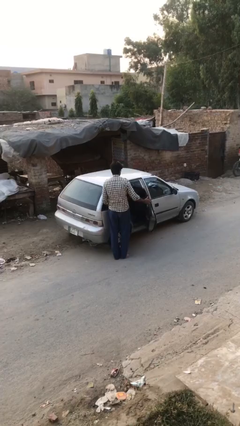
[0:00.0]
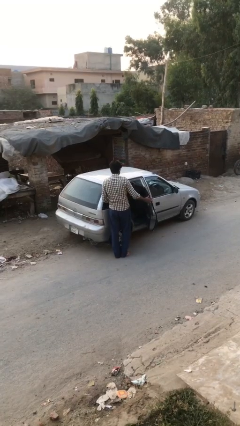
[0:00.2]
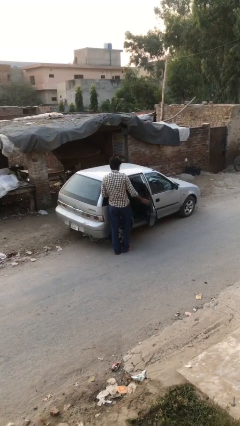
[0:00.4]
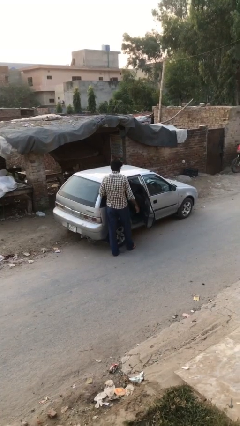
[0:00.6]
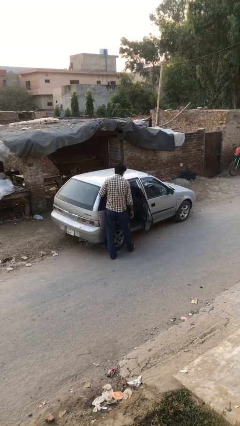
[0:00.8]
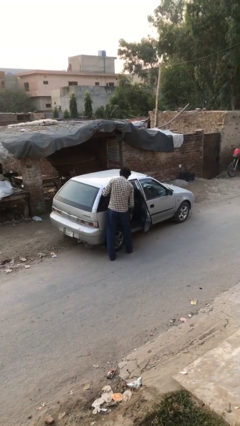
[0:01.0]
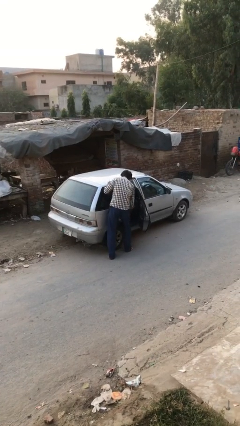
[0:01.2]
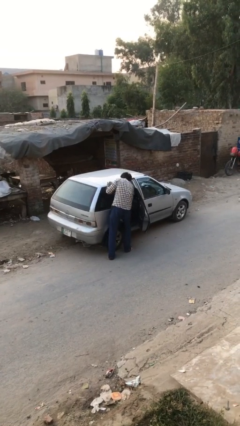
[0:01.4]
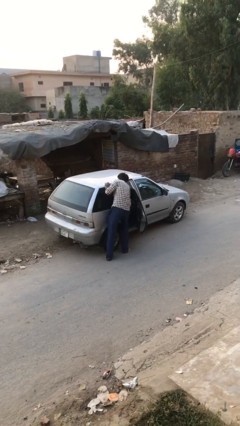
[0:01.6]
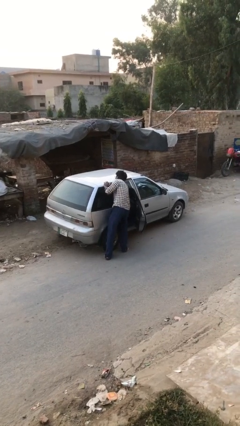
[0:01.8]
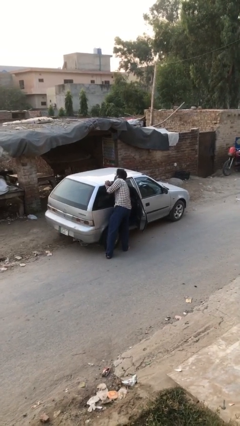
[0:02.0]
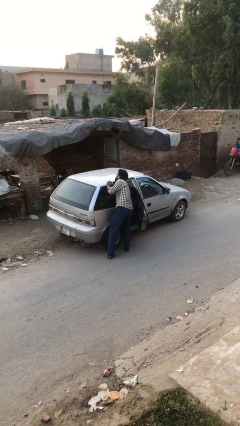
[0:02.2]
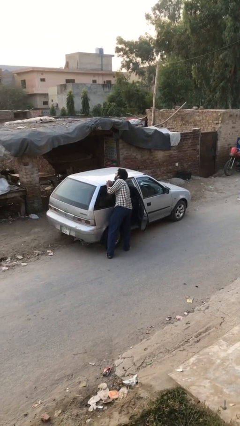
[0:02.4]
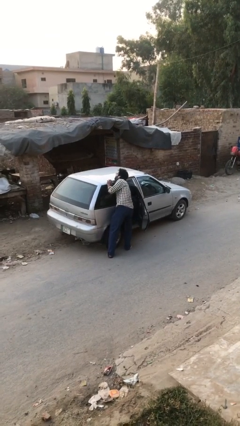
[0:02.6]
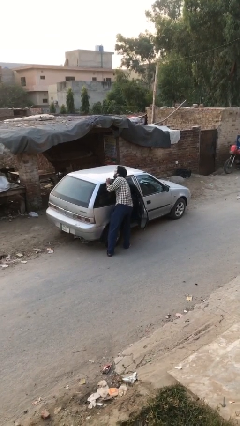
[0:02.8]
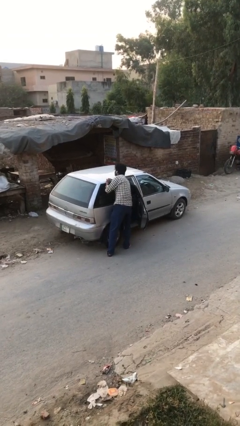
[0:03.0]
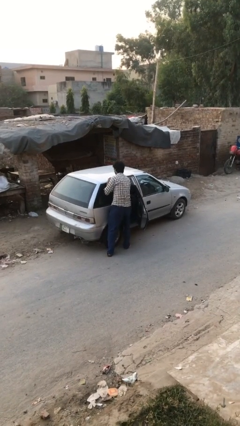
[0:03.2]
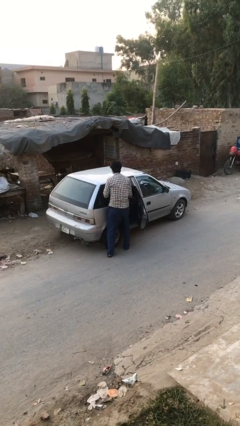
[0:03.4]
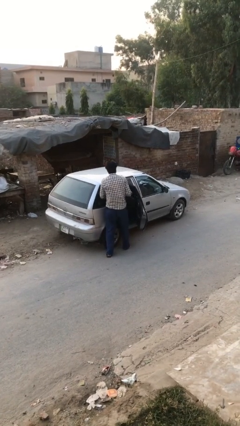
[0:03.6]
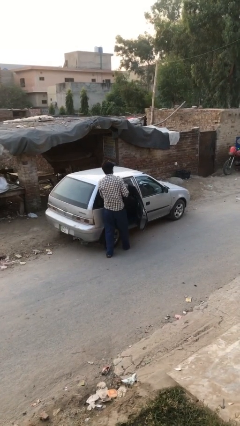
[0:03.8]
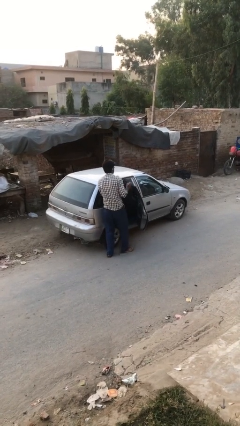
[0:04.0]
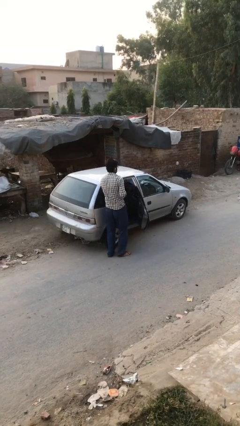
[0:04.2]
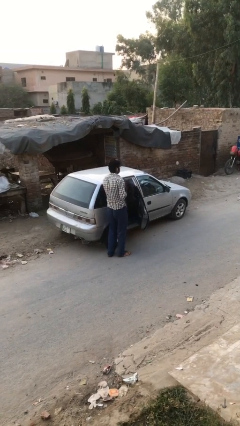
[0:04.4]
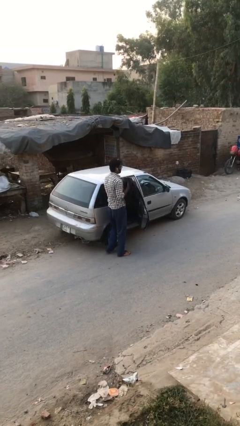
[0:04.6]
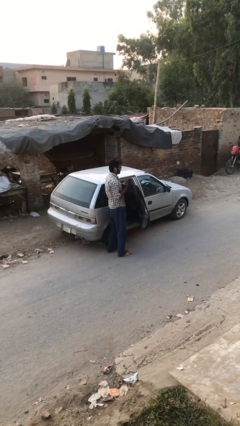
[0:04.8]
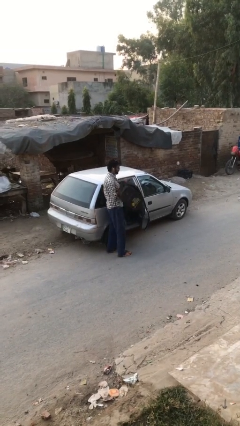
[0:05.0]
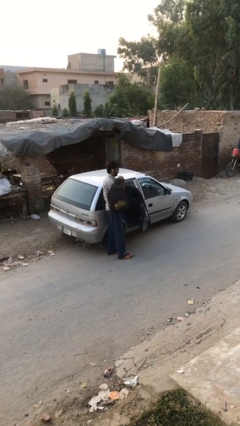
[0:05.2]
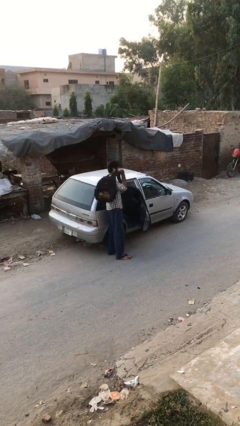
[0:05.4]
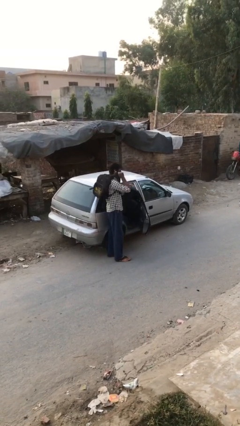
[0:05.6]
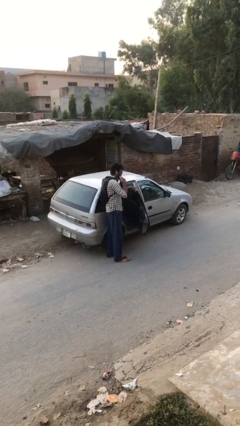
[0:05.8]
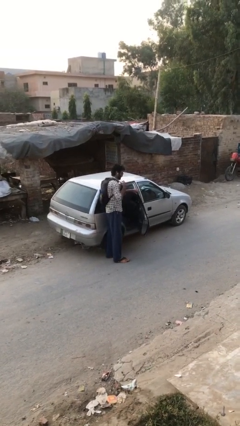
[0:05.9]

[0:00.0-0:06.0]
person unloads car

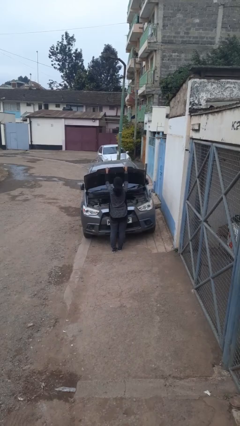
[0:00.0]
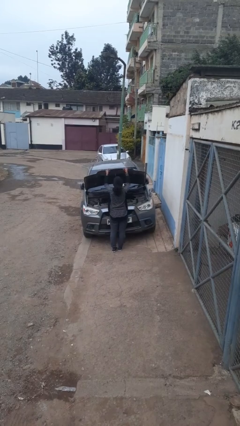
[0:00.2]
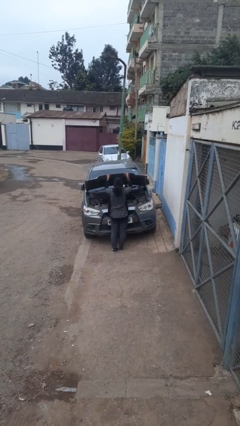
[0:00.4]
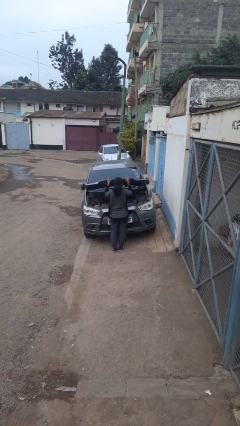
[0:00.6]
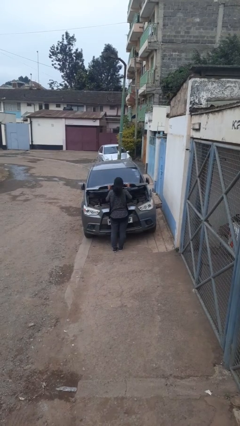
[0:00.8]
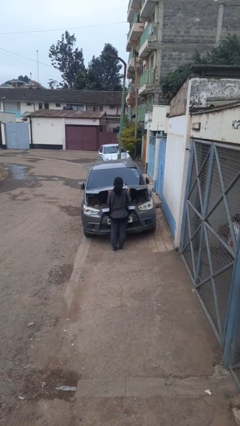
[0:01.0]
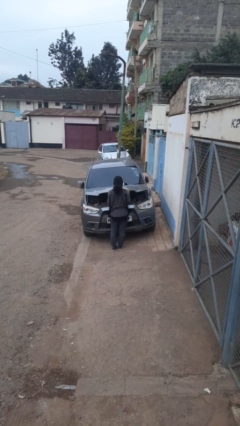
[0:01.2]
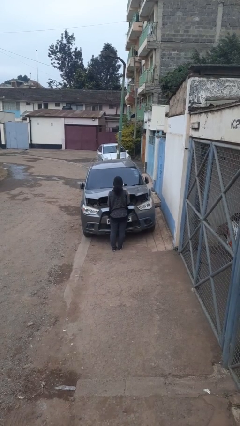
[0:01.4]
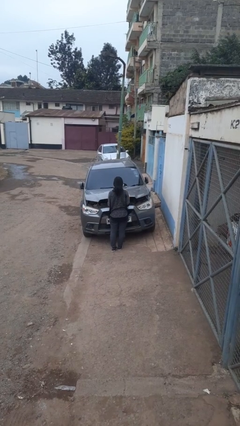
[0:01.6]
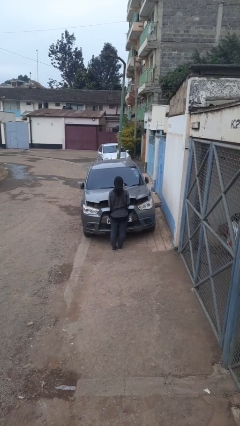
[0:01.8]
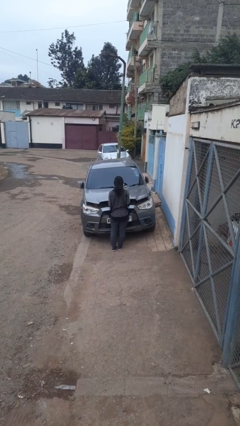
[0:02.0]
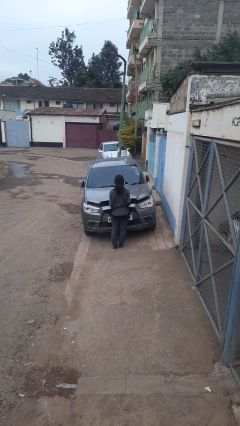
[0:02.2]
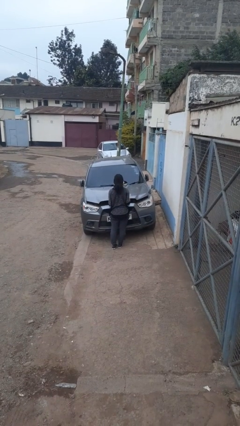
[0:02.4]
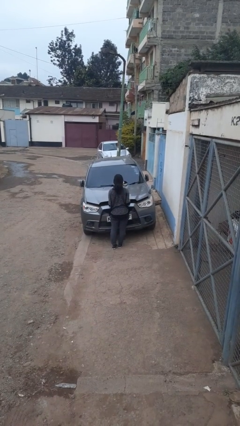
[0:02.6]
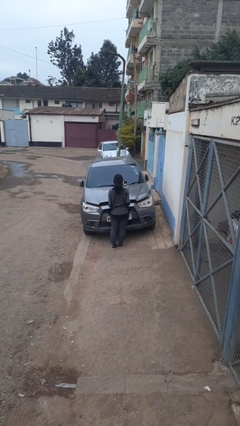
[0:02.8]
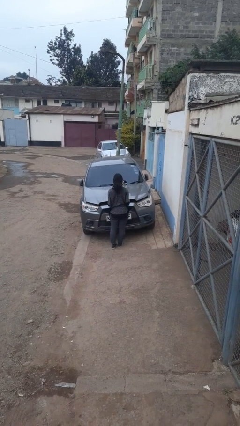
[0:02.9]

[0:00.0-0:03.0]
person closes car hood

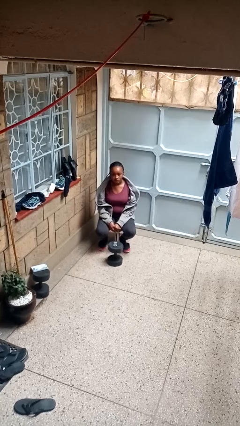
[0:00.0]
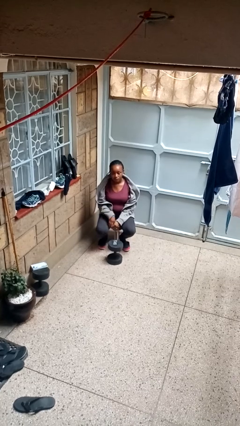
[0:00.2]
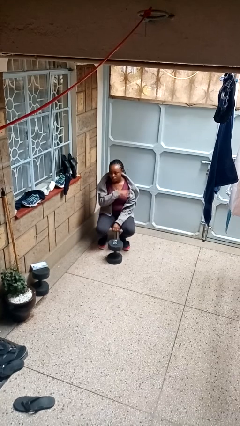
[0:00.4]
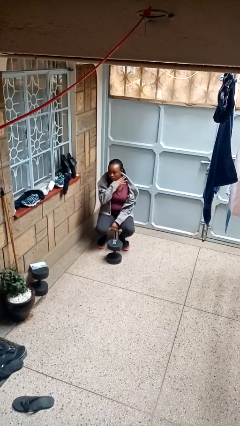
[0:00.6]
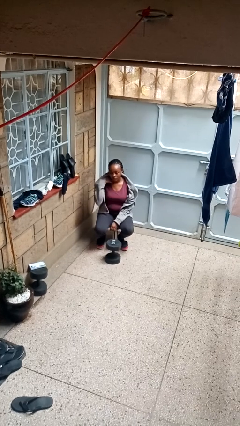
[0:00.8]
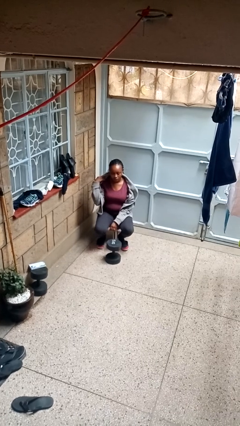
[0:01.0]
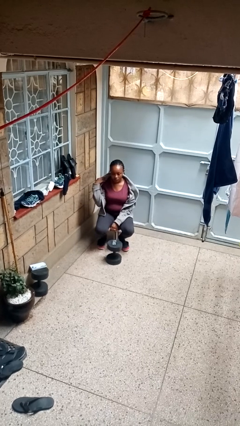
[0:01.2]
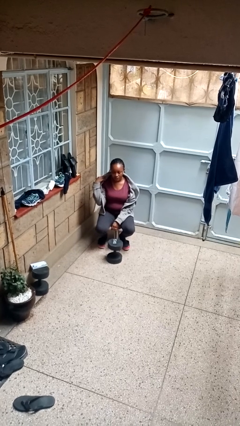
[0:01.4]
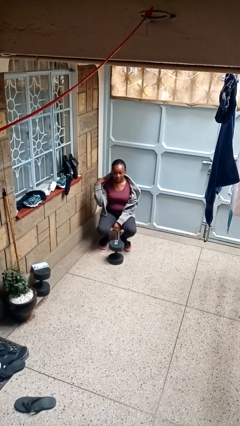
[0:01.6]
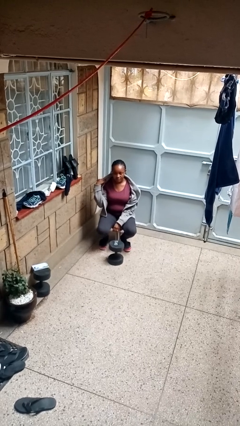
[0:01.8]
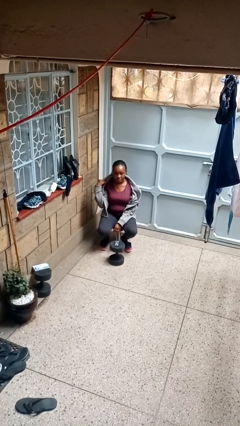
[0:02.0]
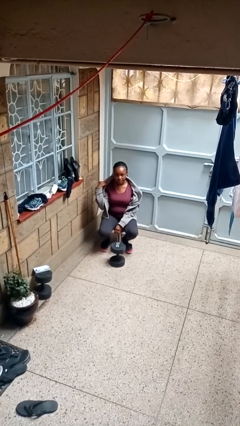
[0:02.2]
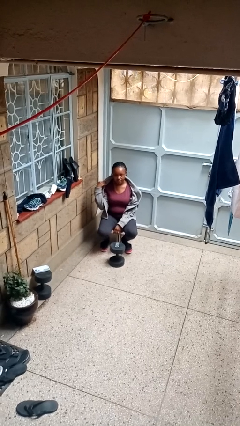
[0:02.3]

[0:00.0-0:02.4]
person gestures cut

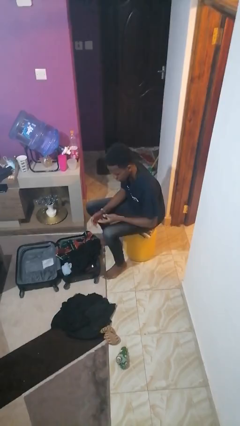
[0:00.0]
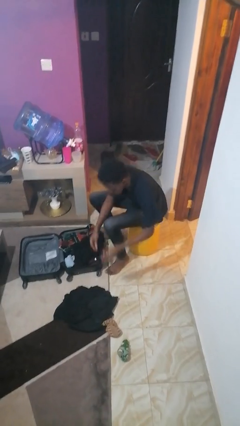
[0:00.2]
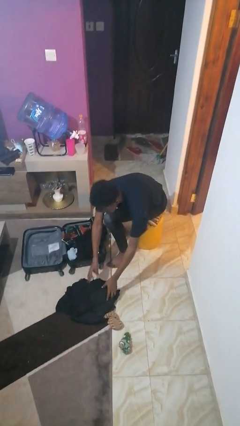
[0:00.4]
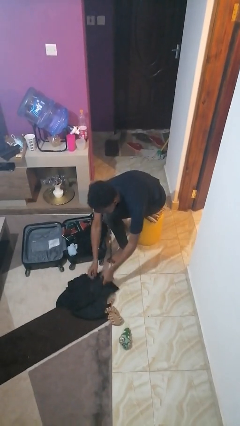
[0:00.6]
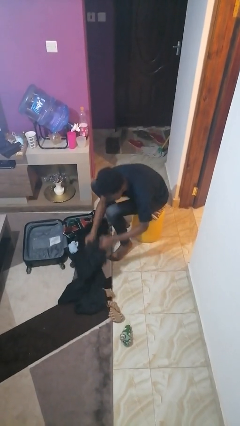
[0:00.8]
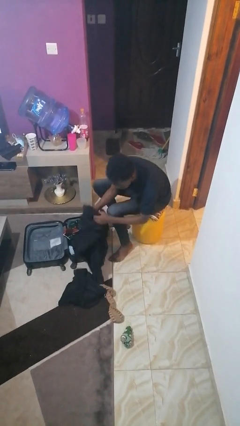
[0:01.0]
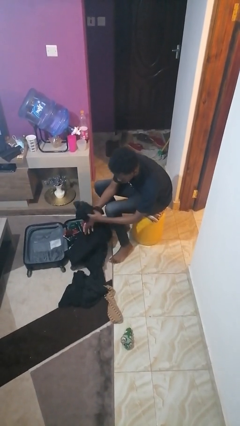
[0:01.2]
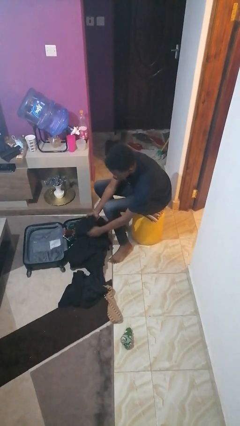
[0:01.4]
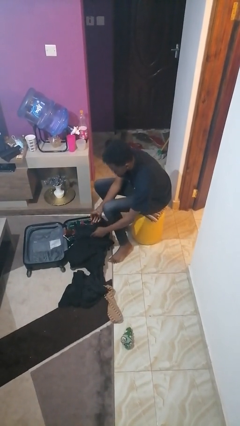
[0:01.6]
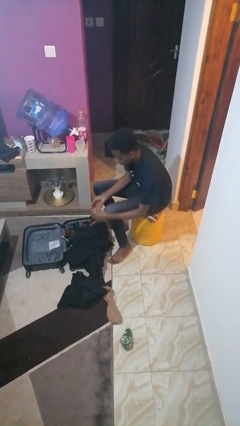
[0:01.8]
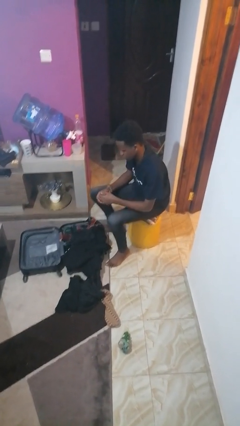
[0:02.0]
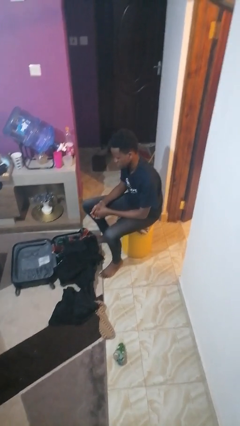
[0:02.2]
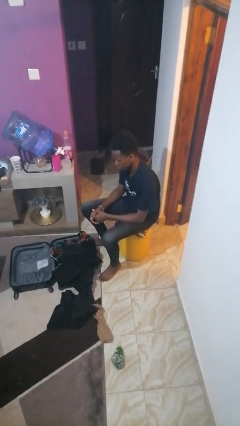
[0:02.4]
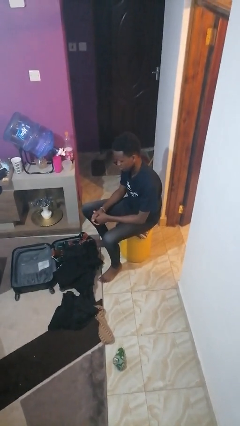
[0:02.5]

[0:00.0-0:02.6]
person loads clothes into suitcase

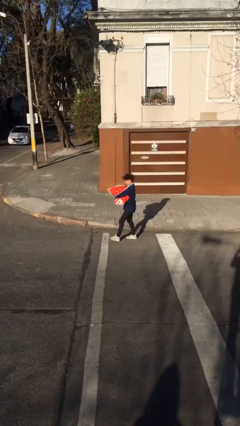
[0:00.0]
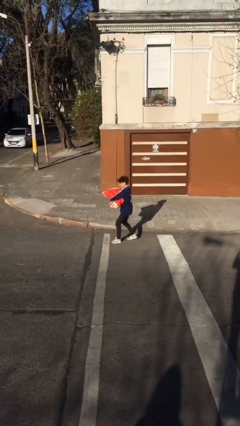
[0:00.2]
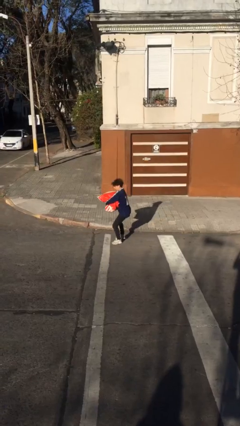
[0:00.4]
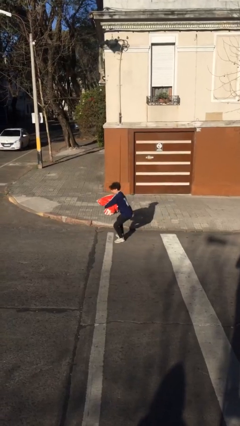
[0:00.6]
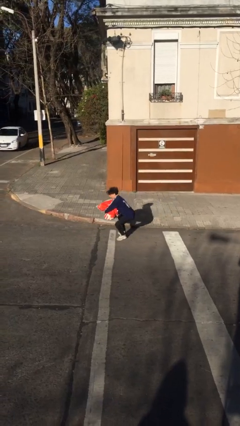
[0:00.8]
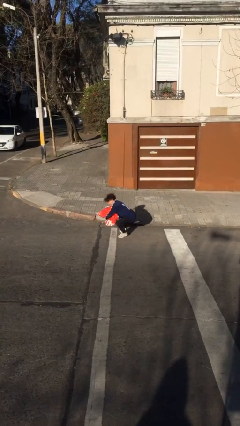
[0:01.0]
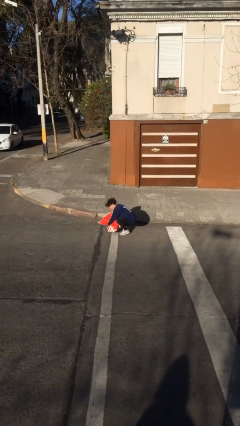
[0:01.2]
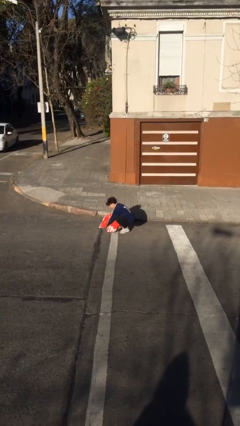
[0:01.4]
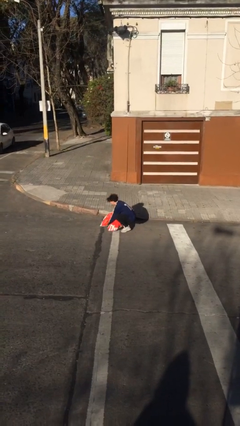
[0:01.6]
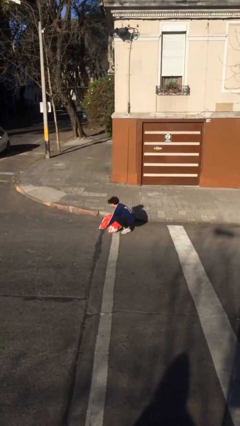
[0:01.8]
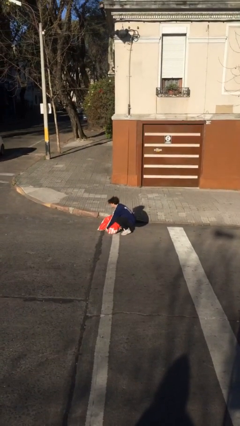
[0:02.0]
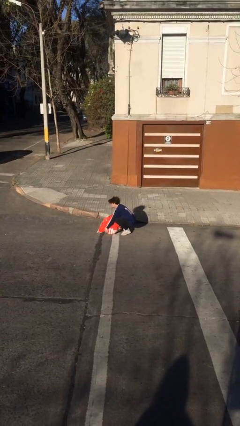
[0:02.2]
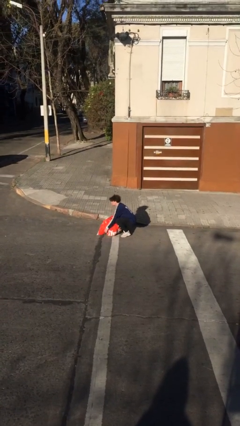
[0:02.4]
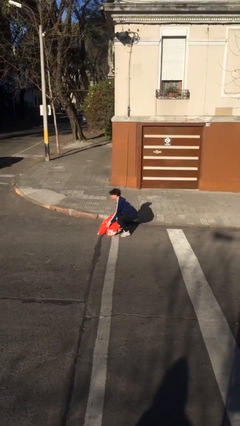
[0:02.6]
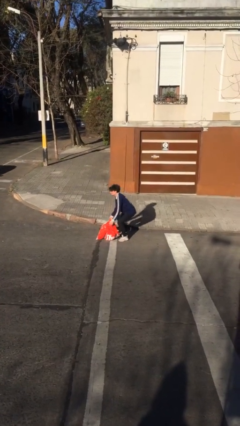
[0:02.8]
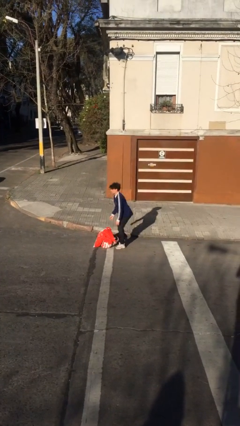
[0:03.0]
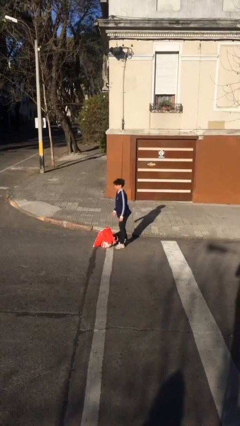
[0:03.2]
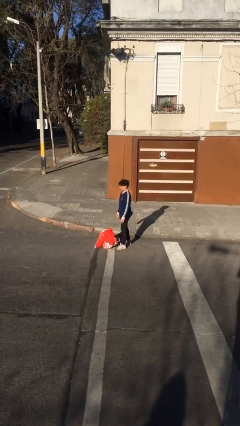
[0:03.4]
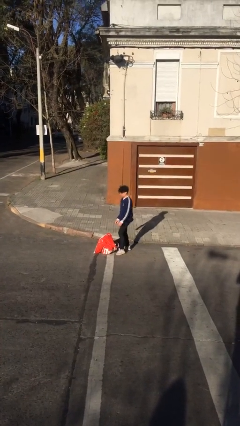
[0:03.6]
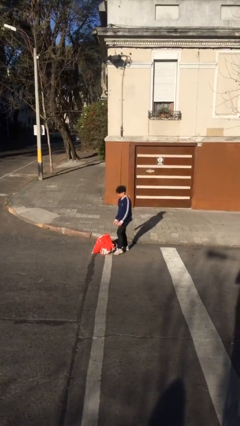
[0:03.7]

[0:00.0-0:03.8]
person puts down object on floor
